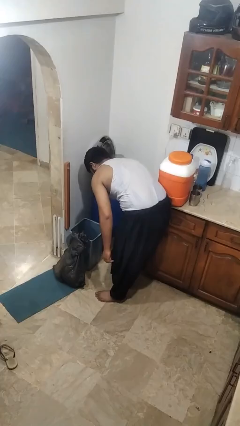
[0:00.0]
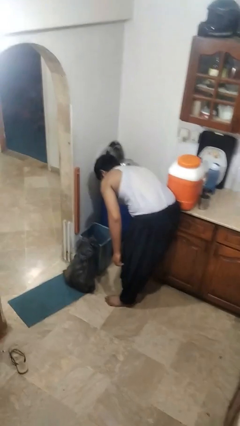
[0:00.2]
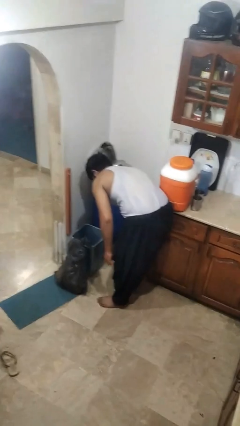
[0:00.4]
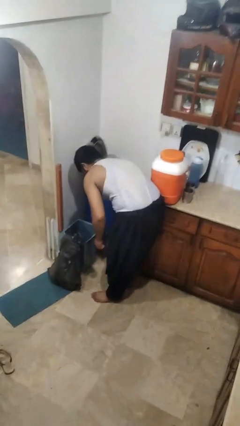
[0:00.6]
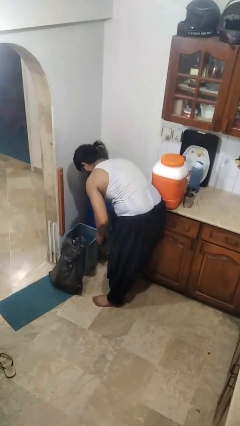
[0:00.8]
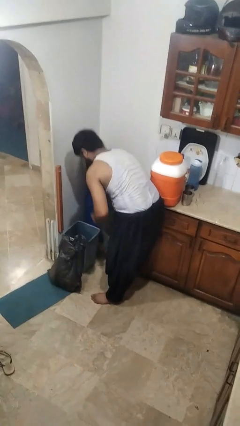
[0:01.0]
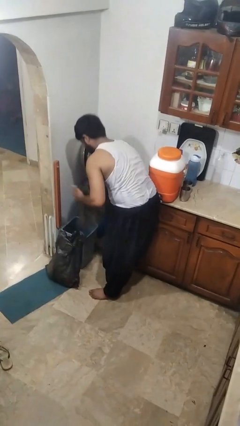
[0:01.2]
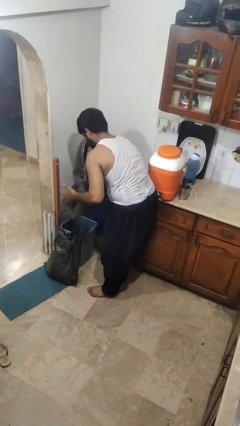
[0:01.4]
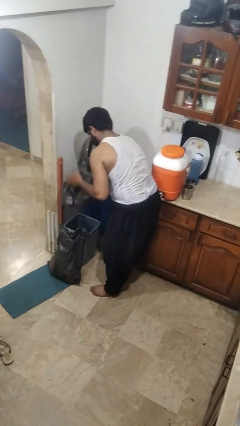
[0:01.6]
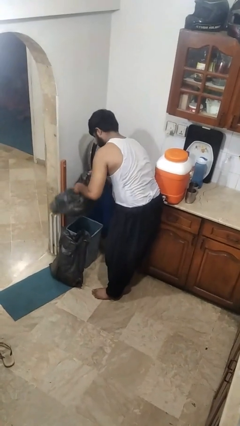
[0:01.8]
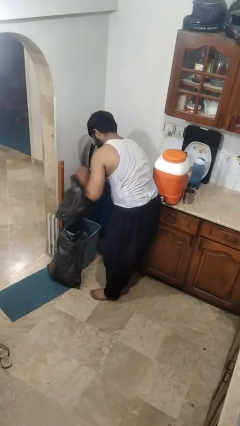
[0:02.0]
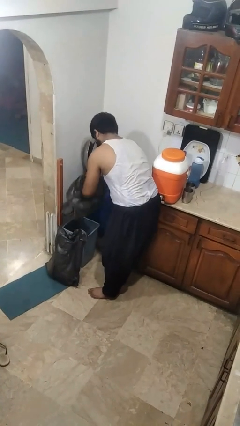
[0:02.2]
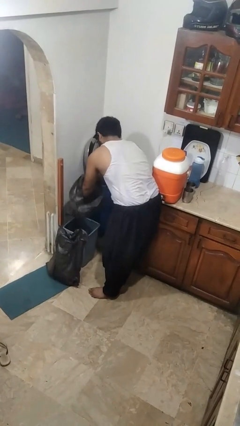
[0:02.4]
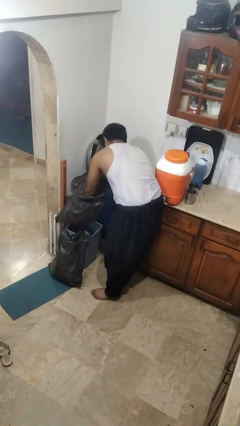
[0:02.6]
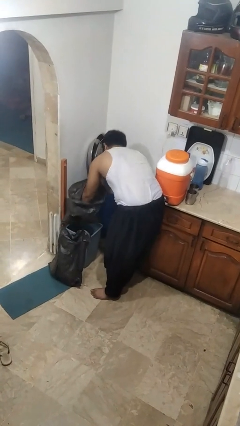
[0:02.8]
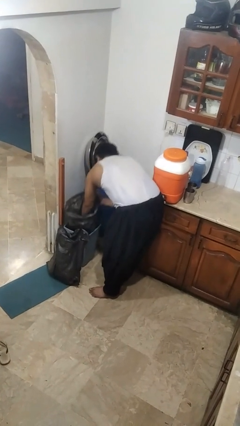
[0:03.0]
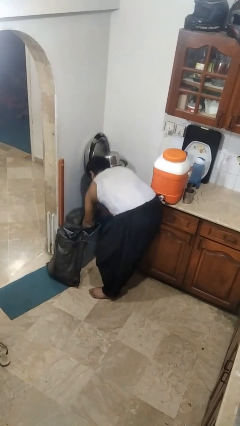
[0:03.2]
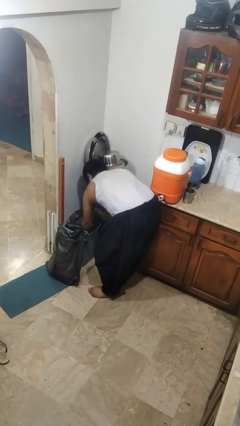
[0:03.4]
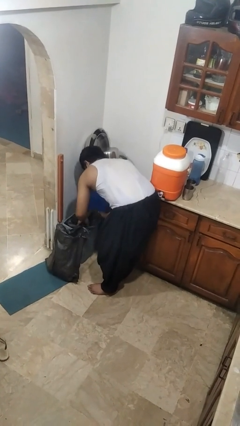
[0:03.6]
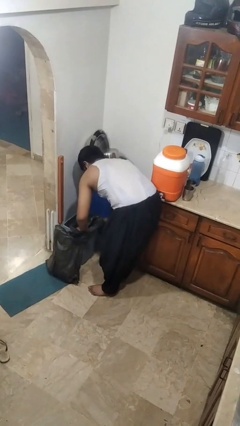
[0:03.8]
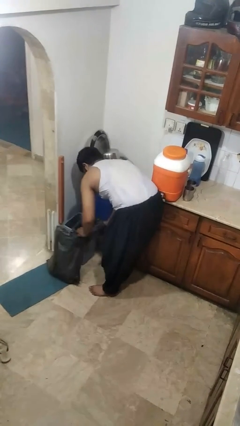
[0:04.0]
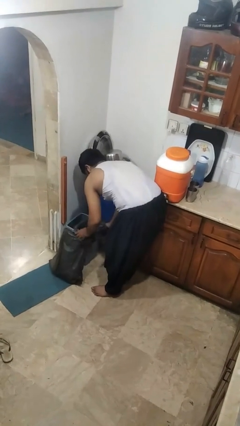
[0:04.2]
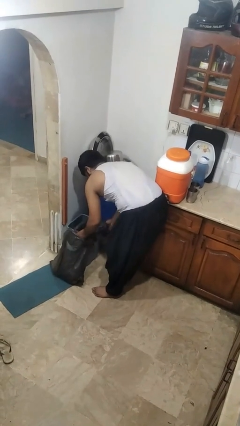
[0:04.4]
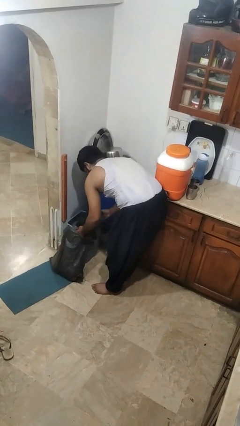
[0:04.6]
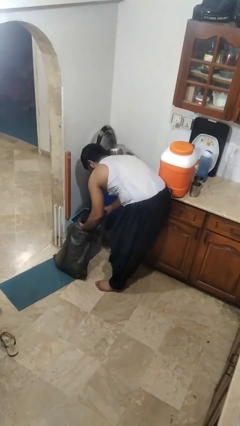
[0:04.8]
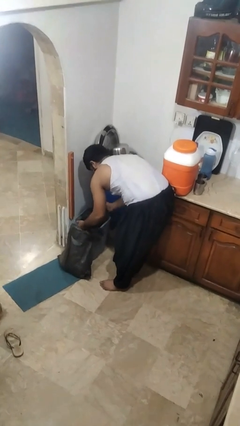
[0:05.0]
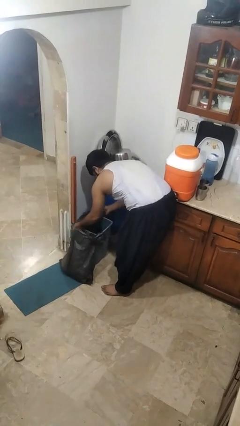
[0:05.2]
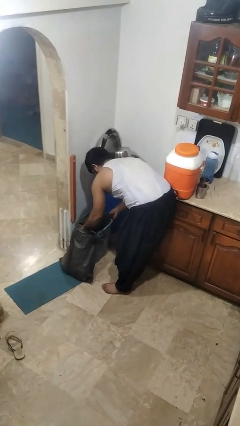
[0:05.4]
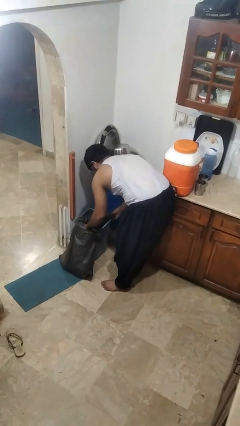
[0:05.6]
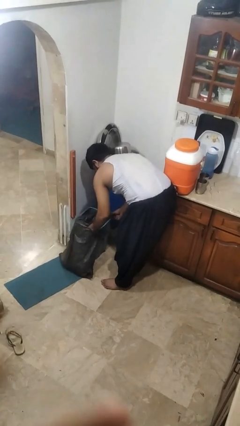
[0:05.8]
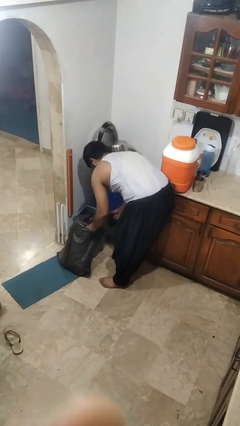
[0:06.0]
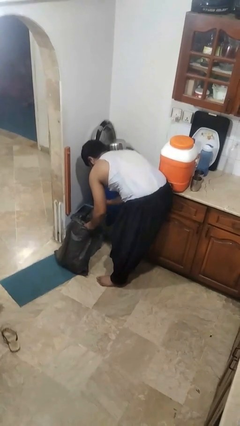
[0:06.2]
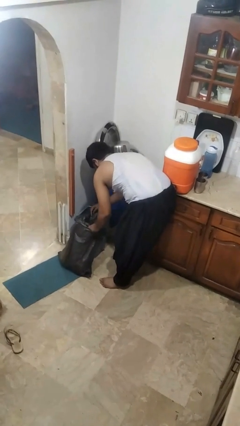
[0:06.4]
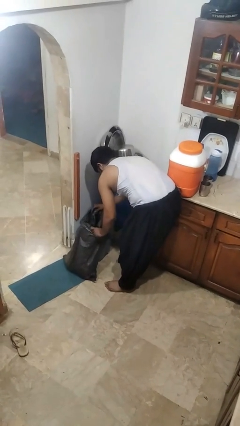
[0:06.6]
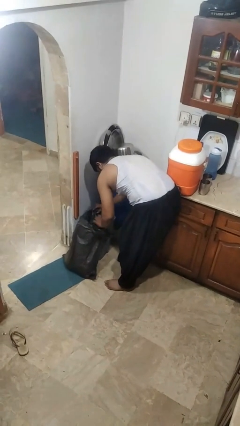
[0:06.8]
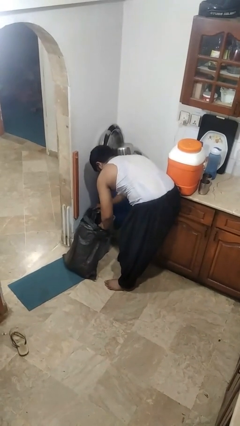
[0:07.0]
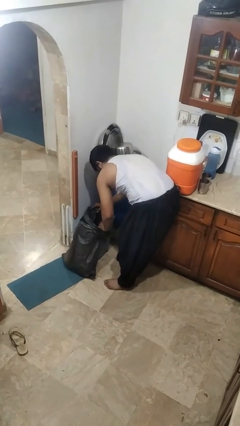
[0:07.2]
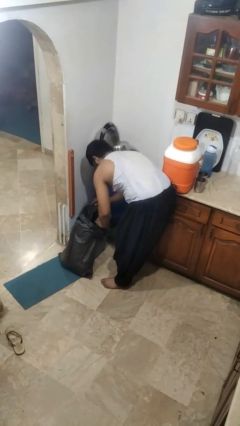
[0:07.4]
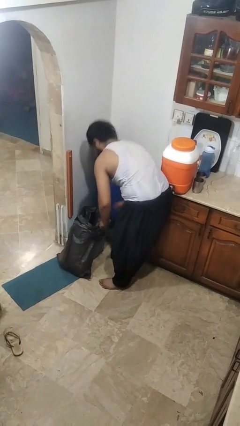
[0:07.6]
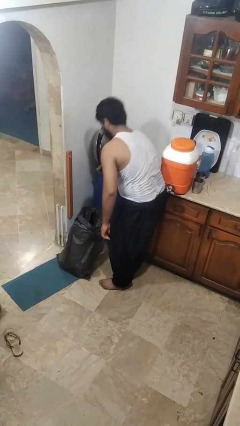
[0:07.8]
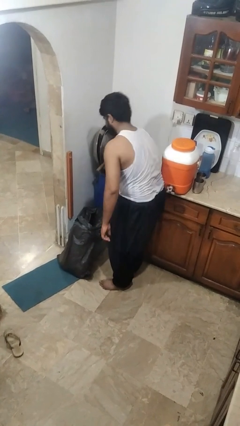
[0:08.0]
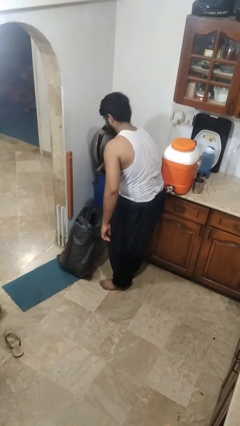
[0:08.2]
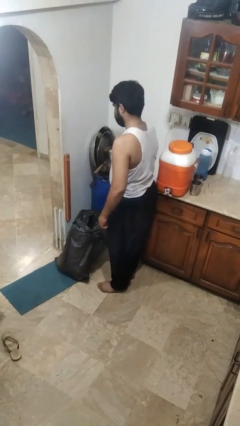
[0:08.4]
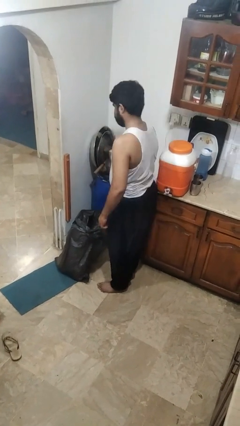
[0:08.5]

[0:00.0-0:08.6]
person inserts trashbag into trashcan

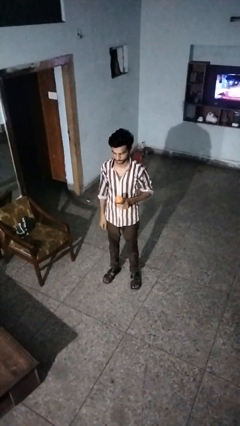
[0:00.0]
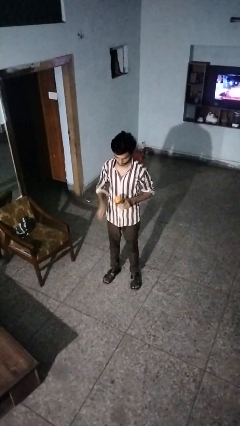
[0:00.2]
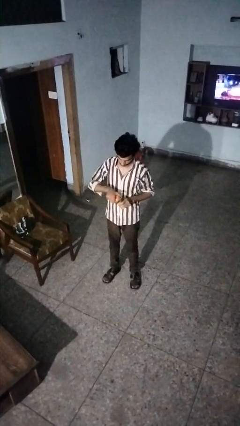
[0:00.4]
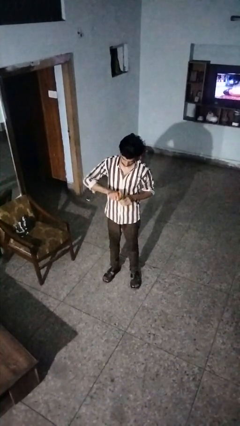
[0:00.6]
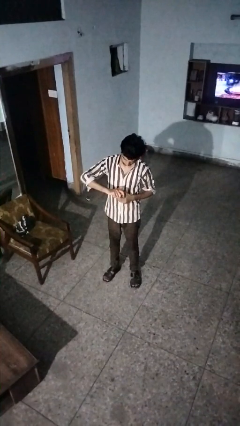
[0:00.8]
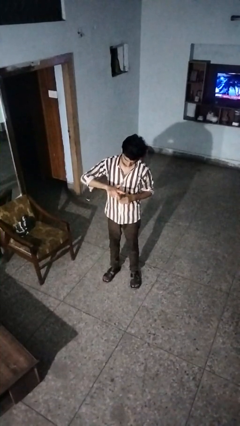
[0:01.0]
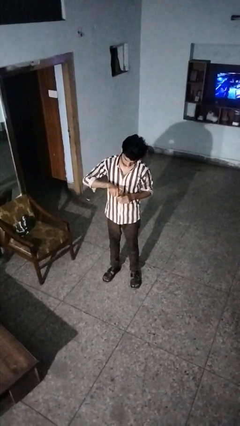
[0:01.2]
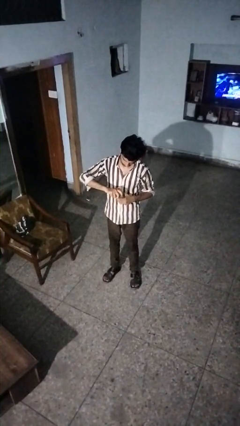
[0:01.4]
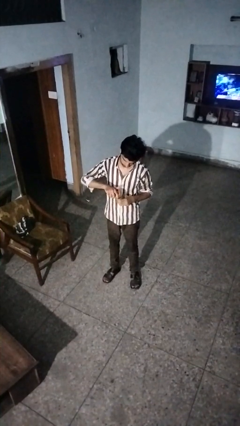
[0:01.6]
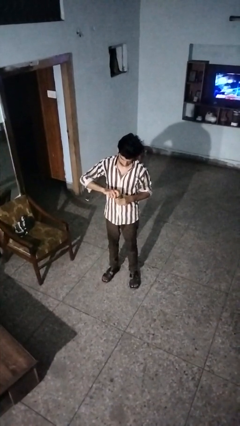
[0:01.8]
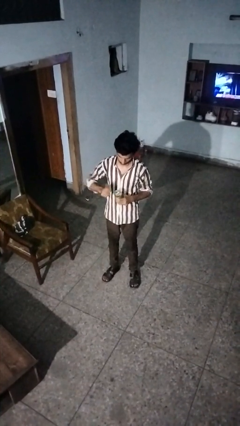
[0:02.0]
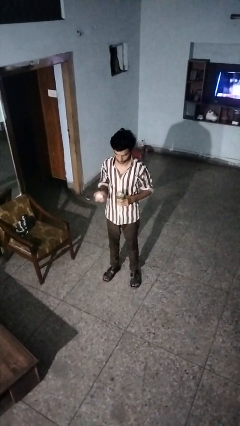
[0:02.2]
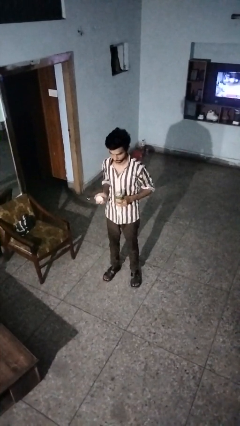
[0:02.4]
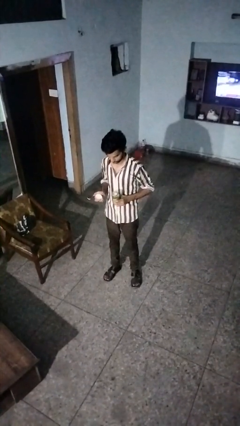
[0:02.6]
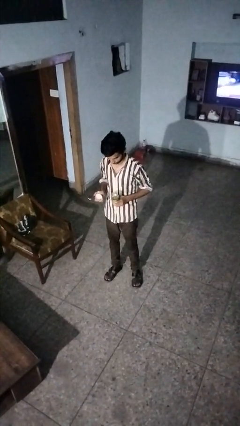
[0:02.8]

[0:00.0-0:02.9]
person opens jar

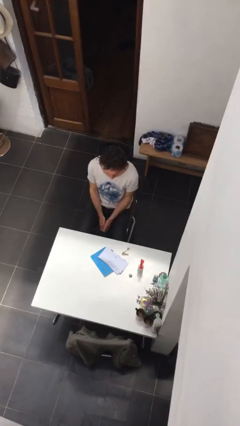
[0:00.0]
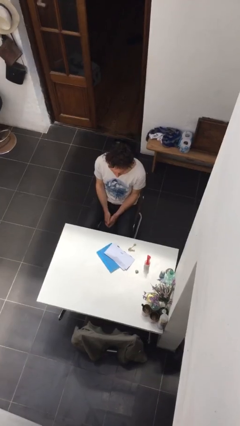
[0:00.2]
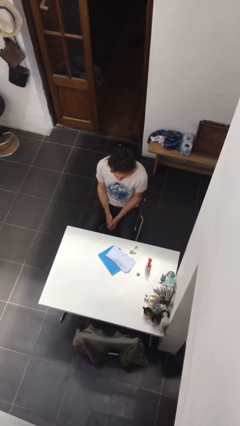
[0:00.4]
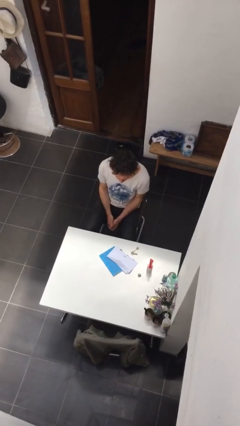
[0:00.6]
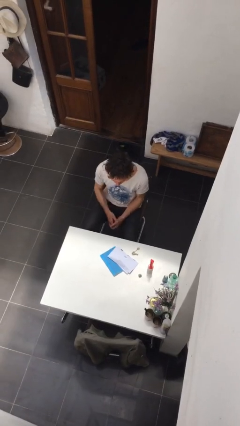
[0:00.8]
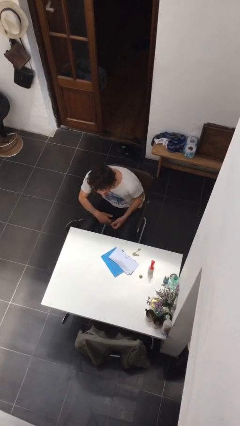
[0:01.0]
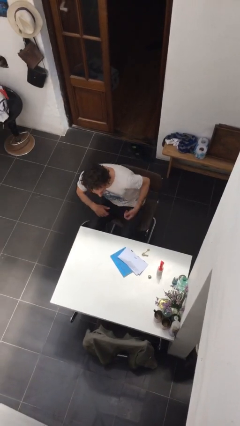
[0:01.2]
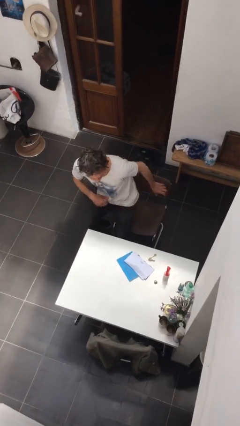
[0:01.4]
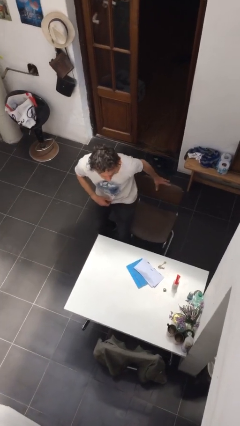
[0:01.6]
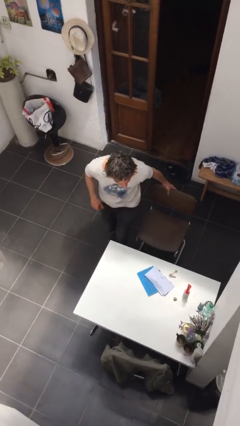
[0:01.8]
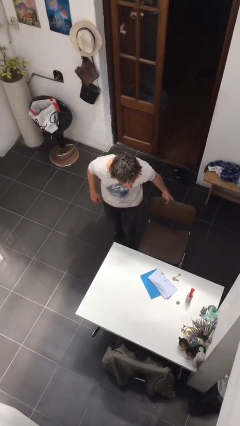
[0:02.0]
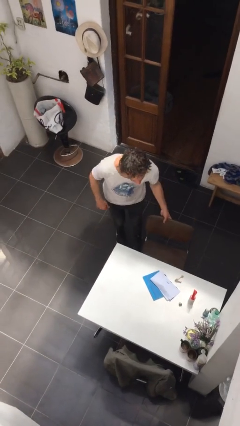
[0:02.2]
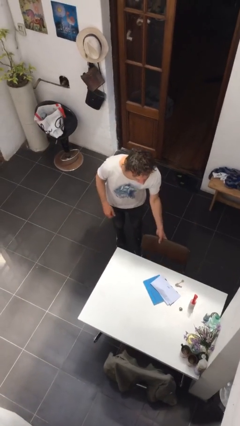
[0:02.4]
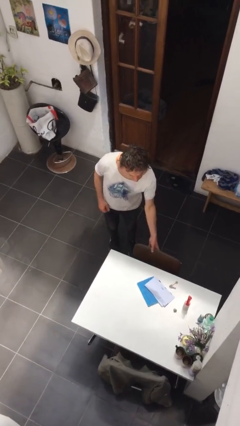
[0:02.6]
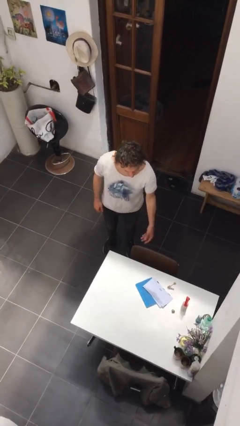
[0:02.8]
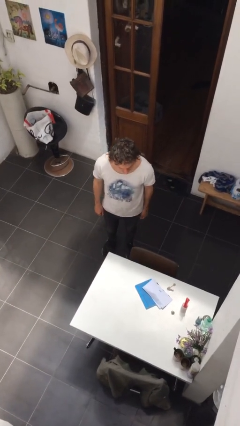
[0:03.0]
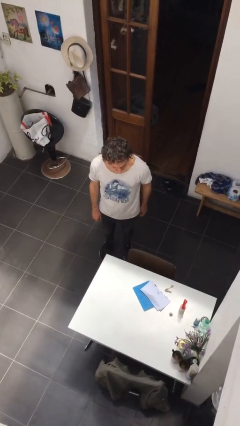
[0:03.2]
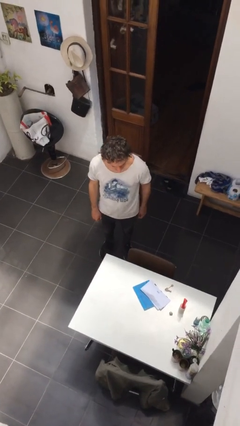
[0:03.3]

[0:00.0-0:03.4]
person stands up

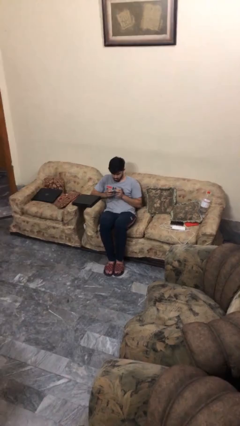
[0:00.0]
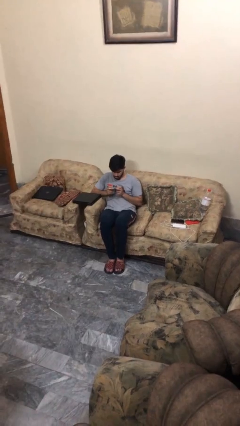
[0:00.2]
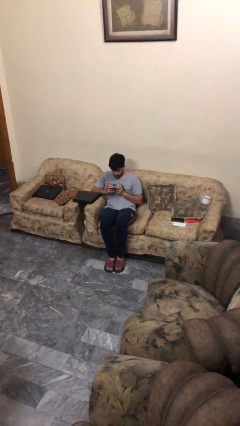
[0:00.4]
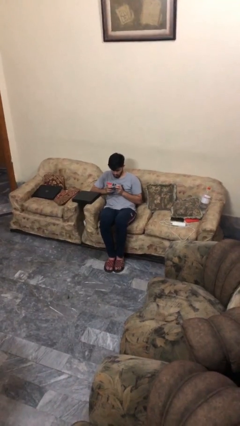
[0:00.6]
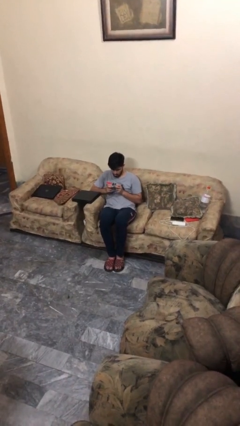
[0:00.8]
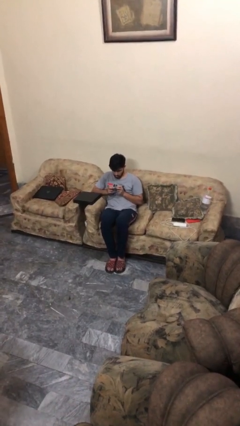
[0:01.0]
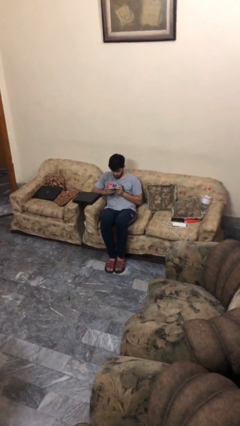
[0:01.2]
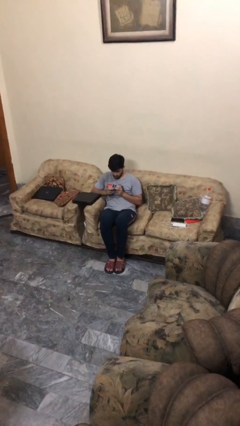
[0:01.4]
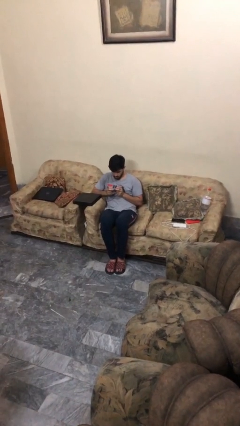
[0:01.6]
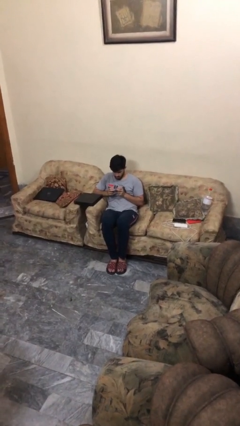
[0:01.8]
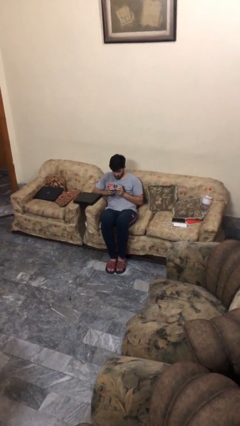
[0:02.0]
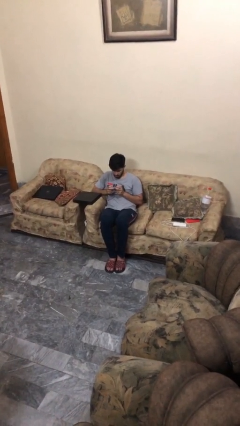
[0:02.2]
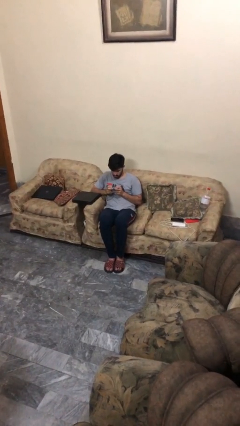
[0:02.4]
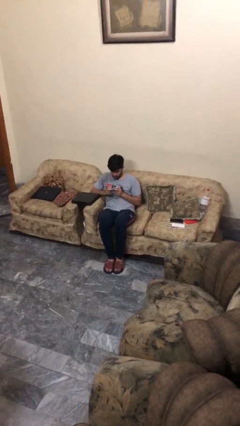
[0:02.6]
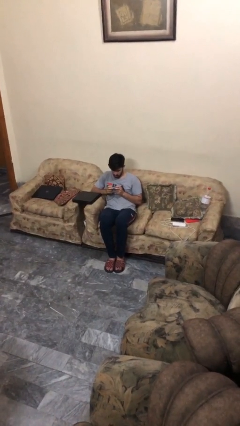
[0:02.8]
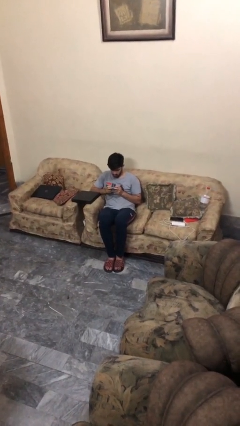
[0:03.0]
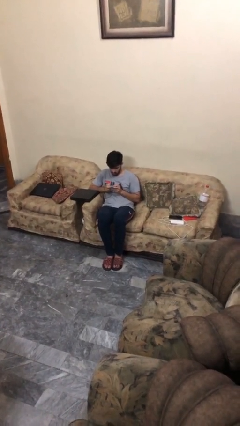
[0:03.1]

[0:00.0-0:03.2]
person interacts with handheld game
